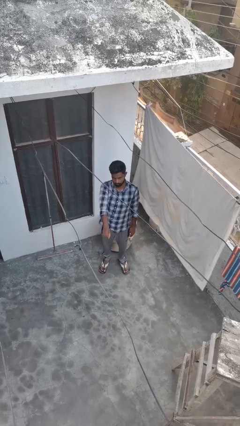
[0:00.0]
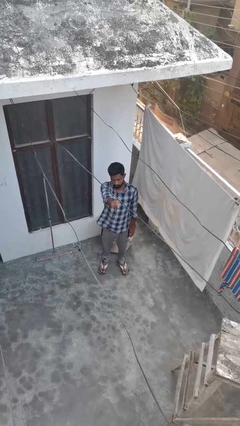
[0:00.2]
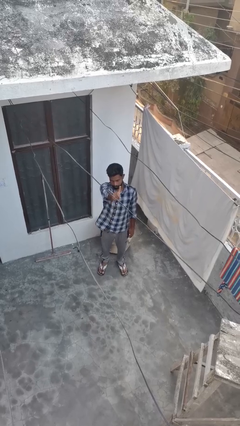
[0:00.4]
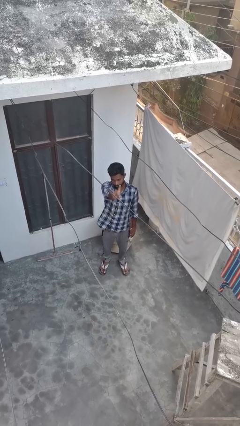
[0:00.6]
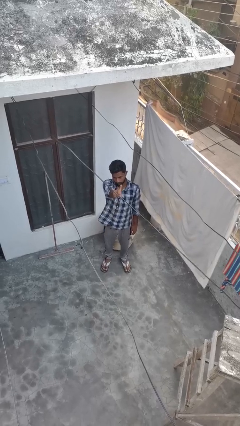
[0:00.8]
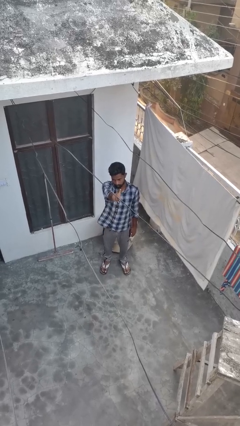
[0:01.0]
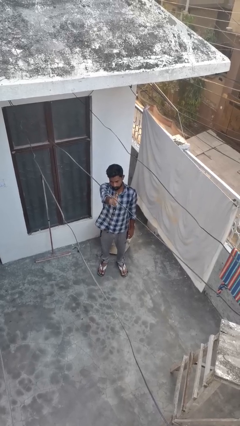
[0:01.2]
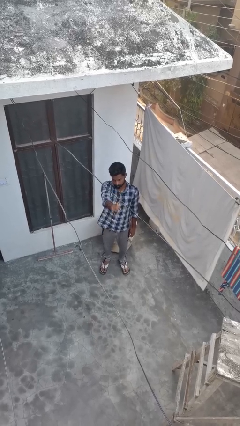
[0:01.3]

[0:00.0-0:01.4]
person gestures number one

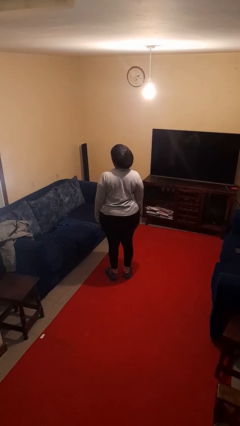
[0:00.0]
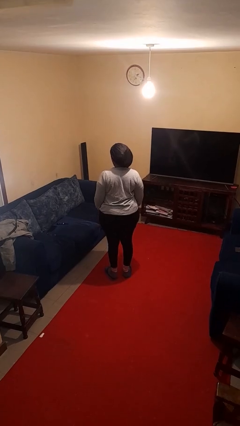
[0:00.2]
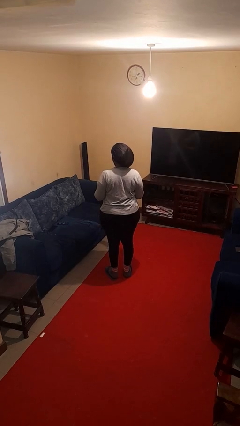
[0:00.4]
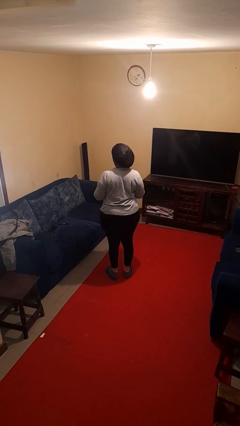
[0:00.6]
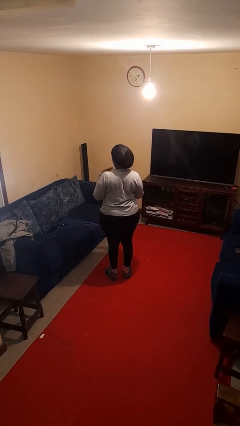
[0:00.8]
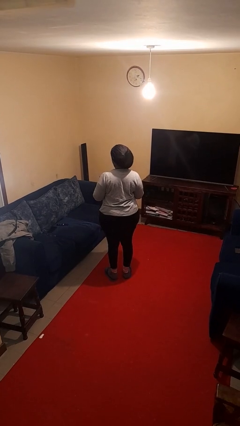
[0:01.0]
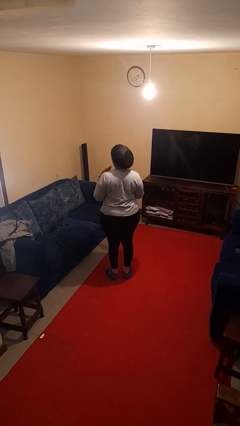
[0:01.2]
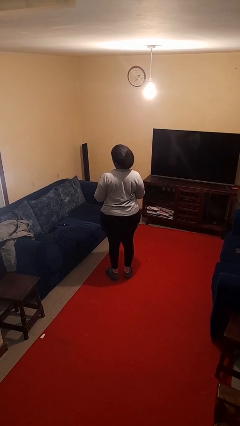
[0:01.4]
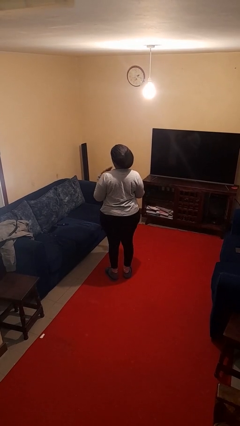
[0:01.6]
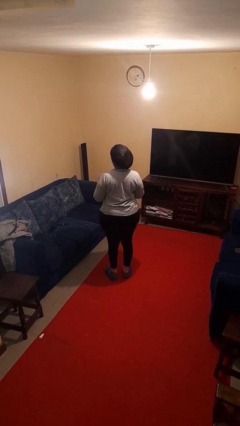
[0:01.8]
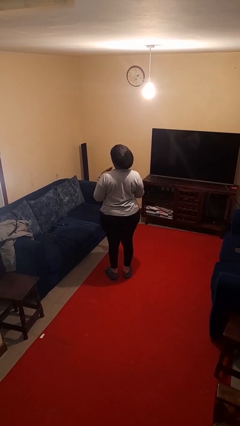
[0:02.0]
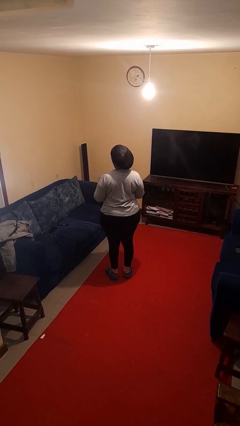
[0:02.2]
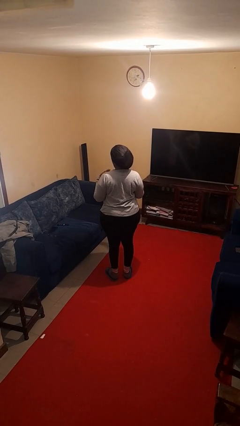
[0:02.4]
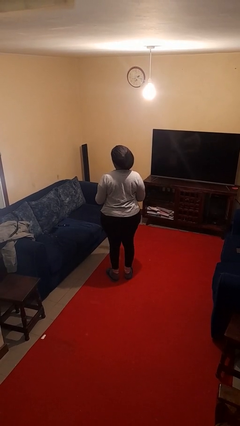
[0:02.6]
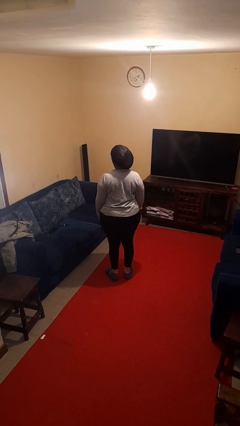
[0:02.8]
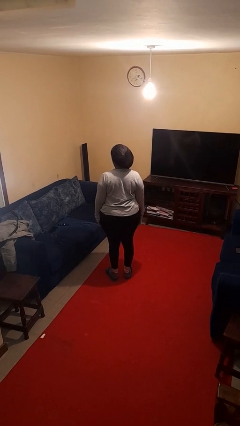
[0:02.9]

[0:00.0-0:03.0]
person drums on chest

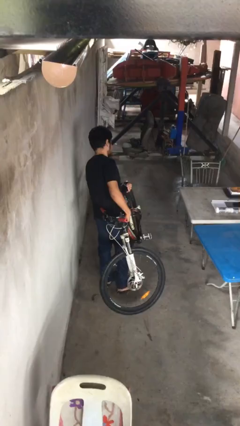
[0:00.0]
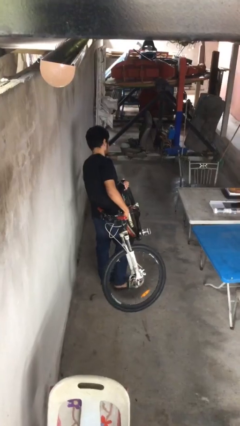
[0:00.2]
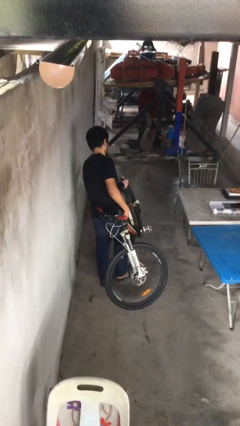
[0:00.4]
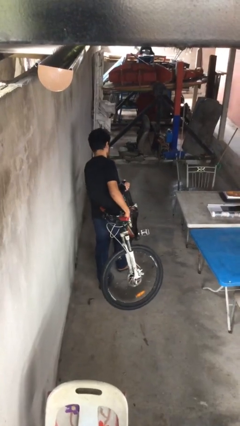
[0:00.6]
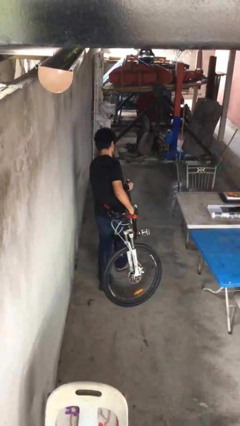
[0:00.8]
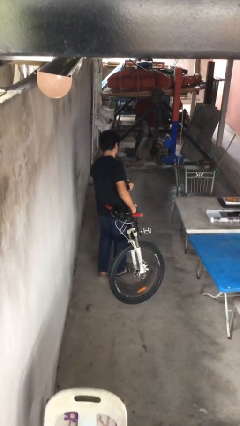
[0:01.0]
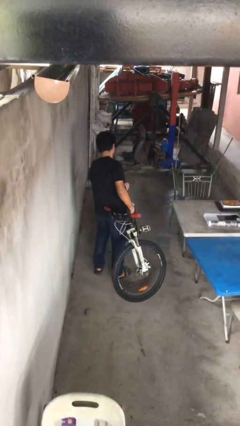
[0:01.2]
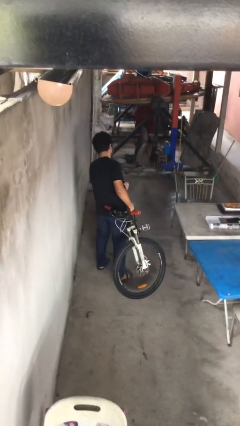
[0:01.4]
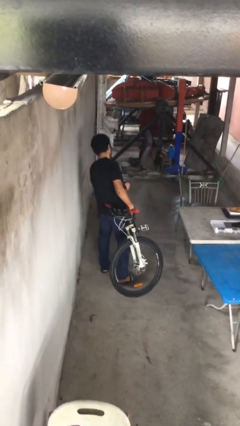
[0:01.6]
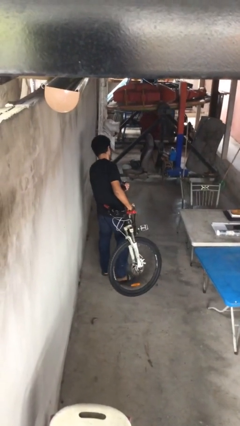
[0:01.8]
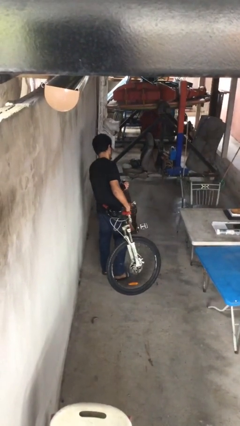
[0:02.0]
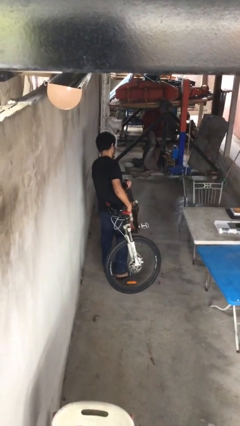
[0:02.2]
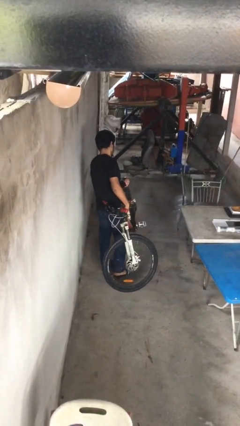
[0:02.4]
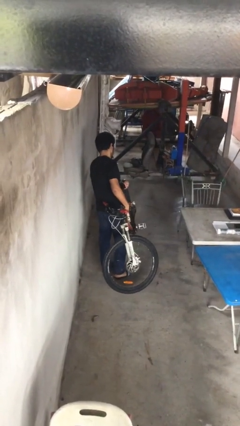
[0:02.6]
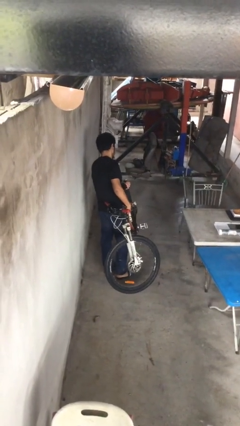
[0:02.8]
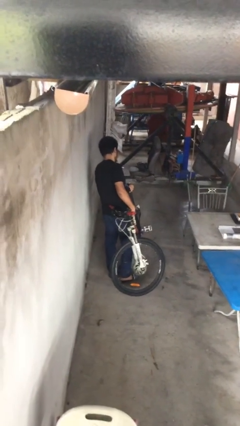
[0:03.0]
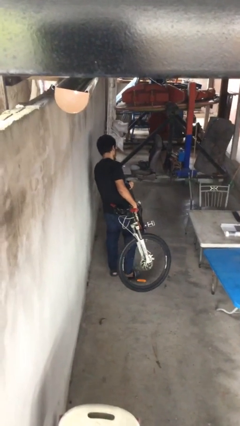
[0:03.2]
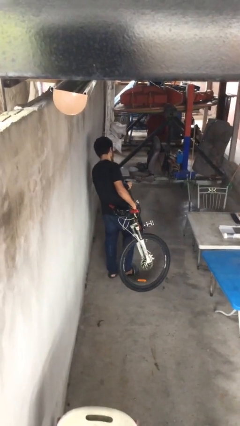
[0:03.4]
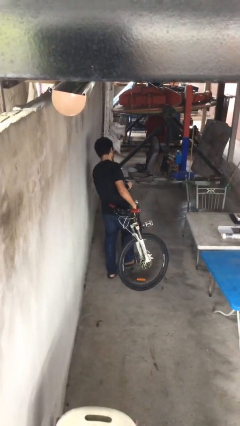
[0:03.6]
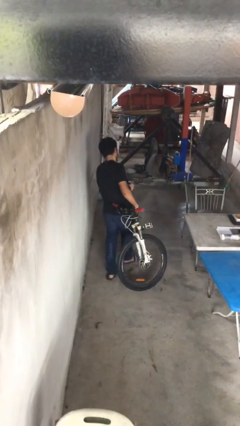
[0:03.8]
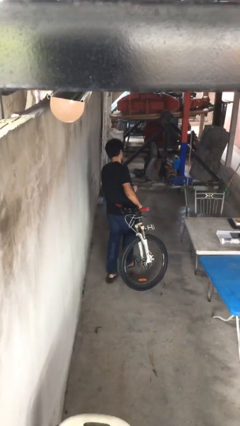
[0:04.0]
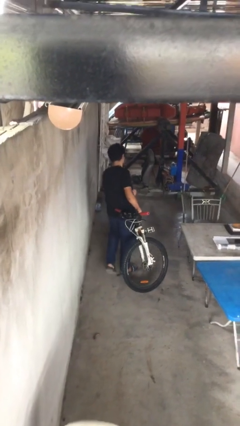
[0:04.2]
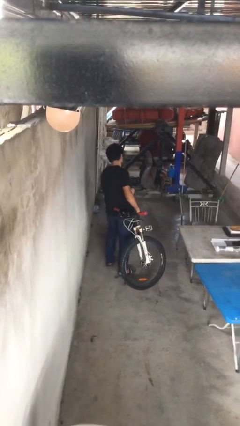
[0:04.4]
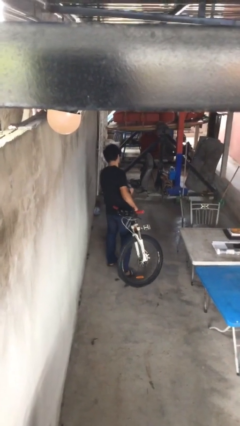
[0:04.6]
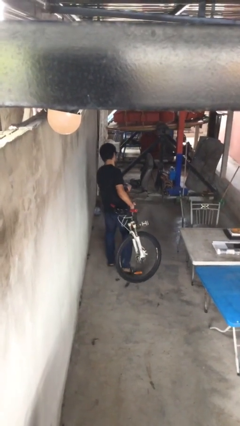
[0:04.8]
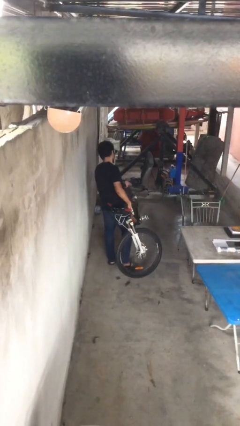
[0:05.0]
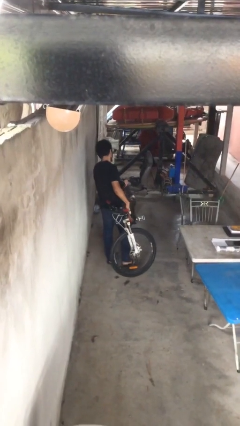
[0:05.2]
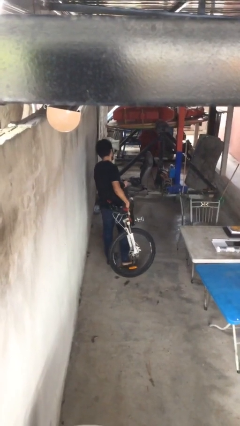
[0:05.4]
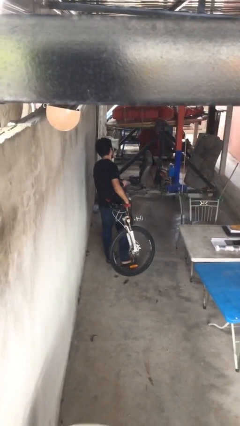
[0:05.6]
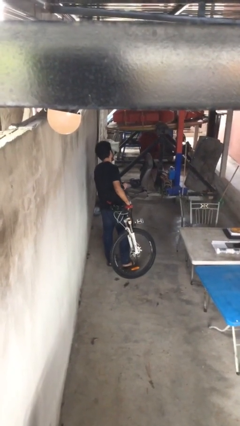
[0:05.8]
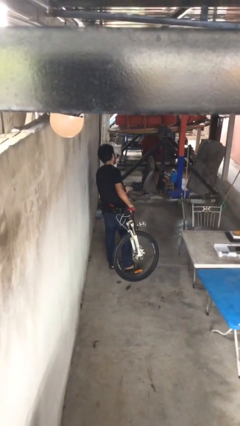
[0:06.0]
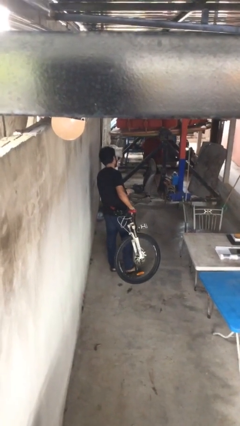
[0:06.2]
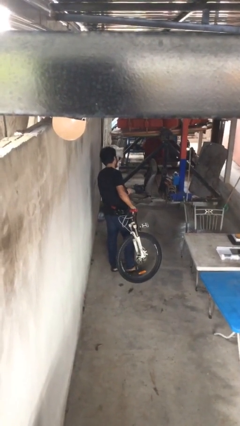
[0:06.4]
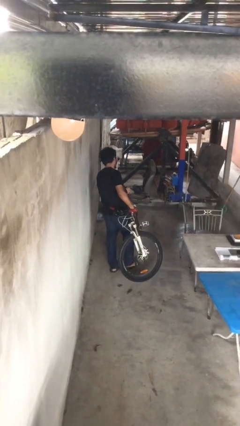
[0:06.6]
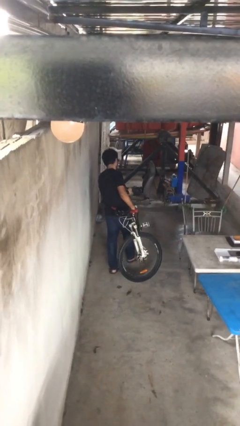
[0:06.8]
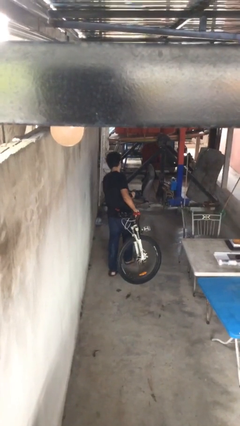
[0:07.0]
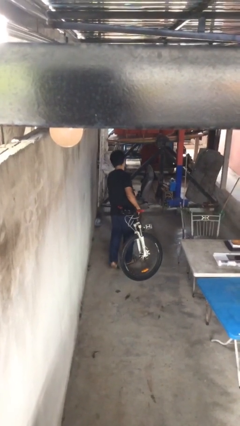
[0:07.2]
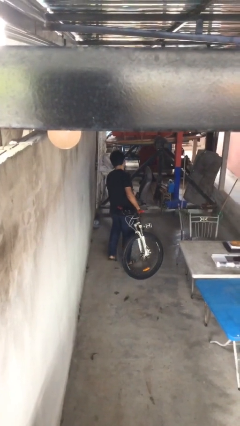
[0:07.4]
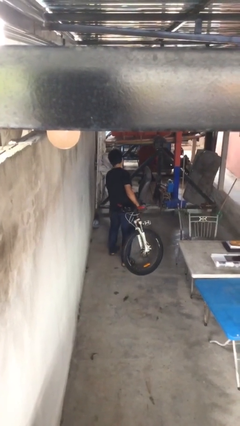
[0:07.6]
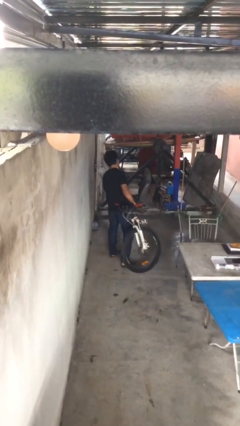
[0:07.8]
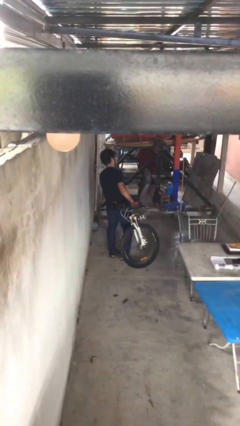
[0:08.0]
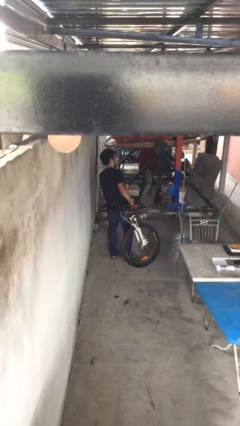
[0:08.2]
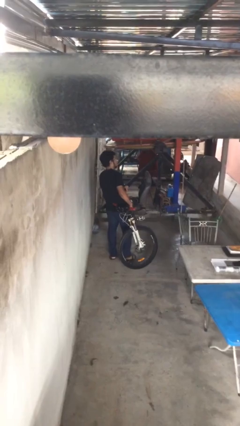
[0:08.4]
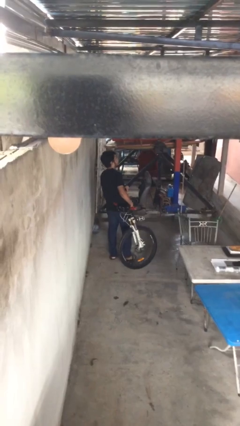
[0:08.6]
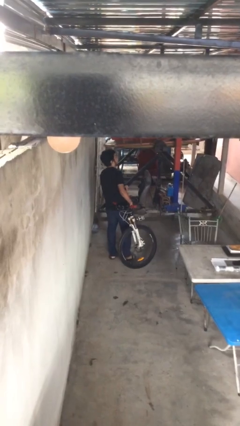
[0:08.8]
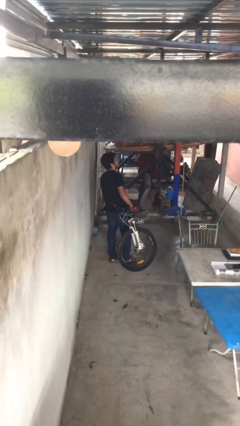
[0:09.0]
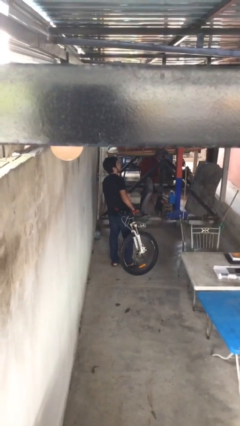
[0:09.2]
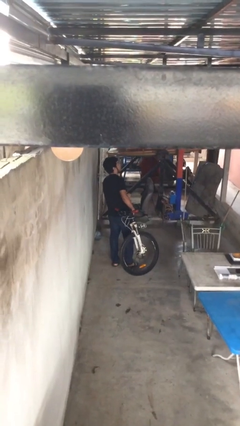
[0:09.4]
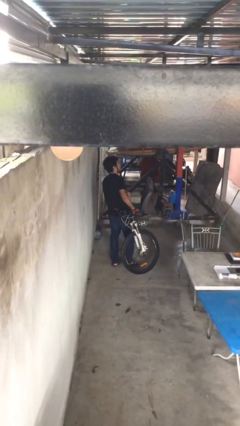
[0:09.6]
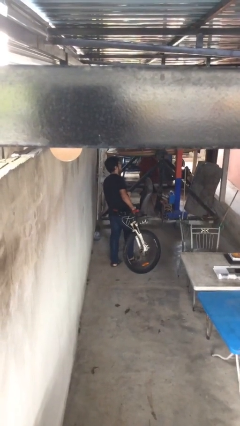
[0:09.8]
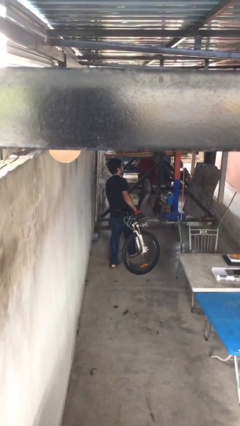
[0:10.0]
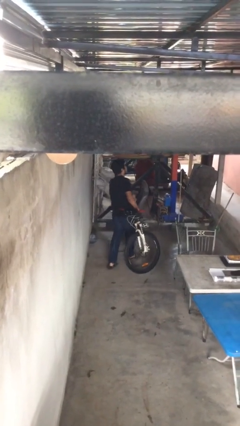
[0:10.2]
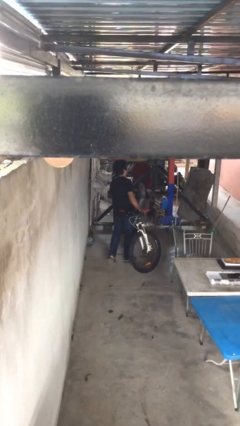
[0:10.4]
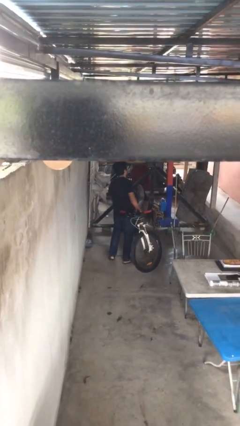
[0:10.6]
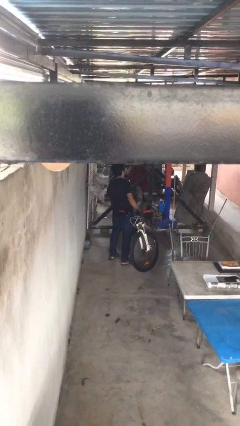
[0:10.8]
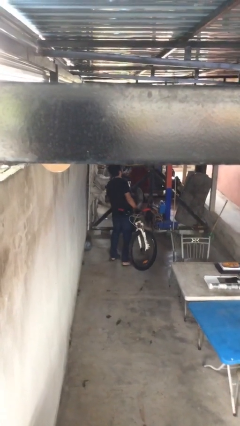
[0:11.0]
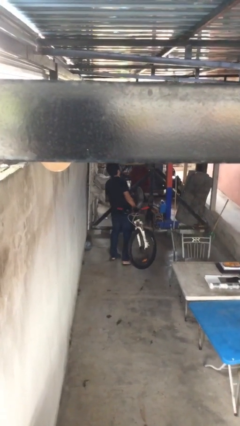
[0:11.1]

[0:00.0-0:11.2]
person carries bicycle

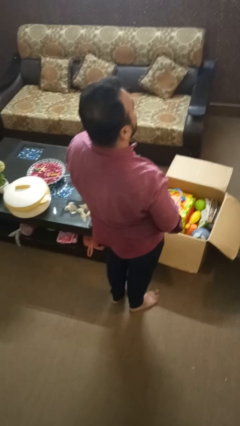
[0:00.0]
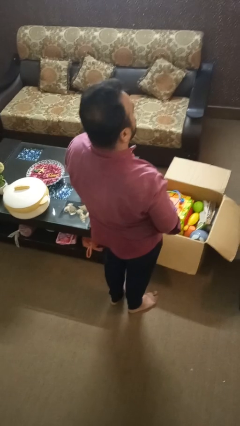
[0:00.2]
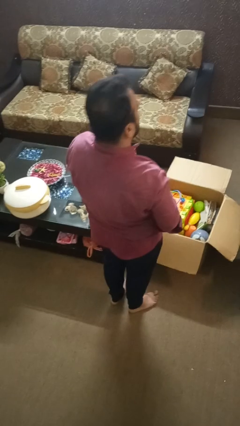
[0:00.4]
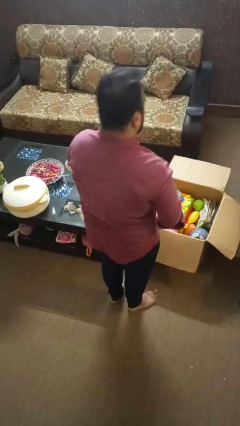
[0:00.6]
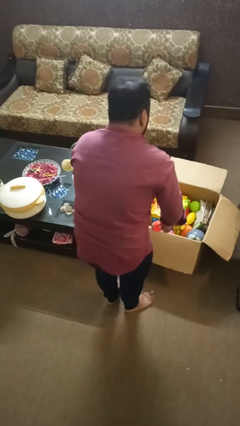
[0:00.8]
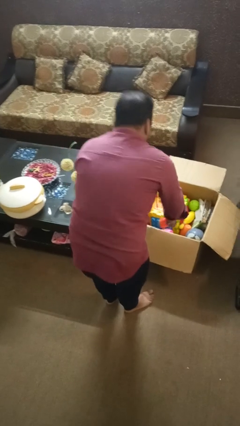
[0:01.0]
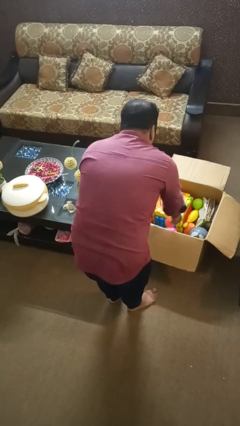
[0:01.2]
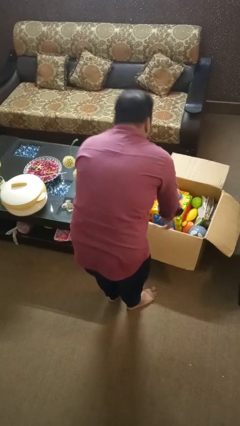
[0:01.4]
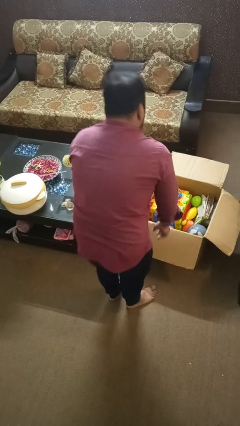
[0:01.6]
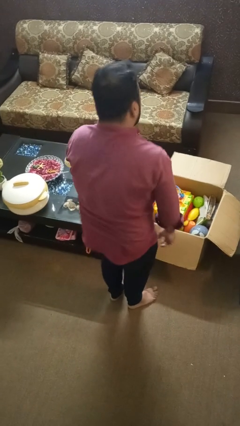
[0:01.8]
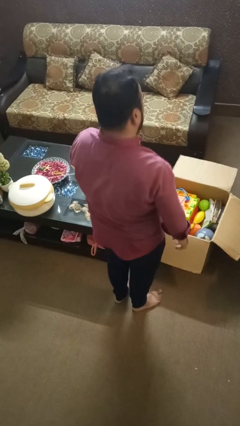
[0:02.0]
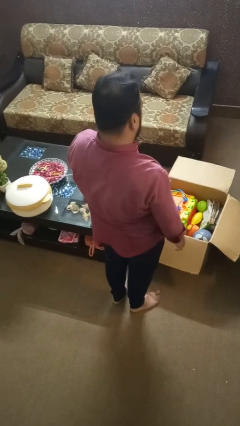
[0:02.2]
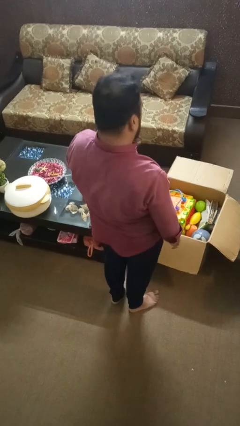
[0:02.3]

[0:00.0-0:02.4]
person puts object into box
